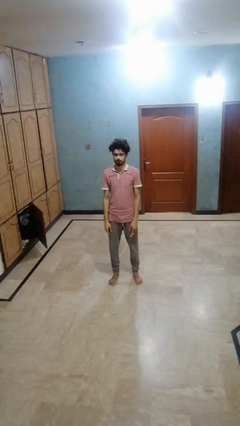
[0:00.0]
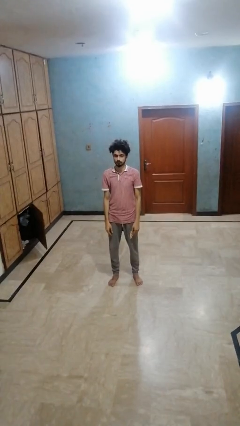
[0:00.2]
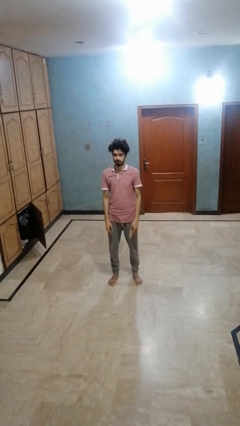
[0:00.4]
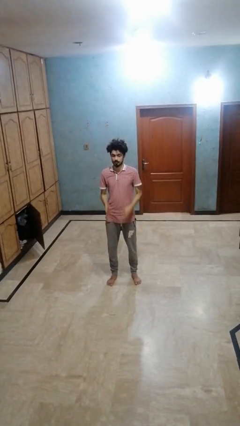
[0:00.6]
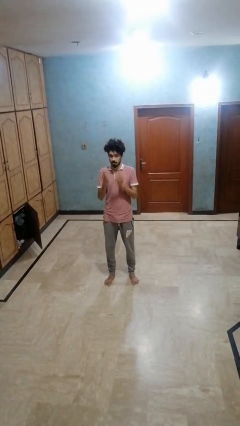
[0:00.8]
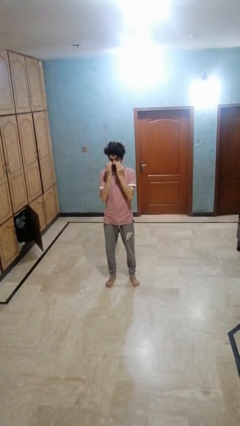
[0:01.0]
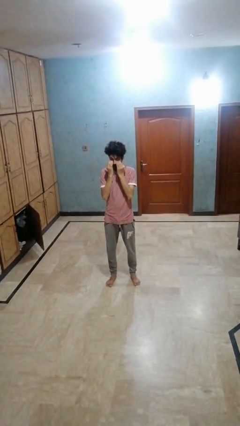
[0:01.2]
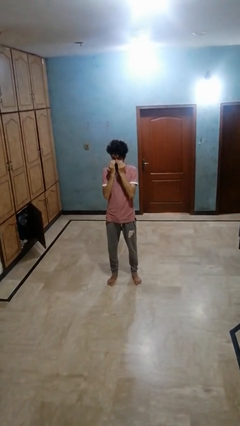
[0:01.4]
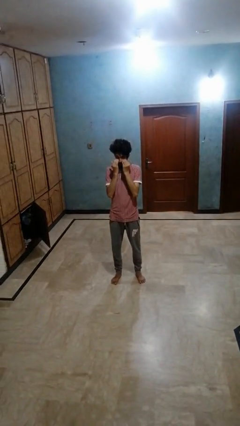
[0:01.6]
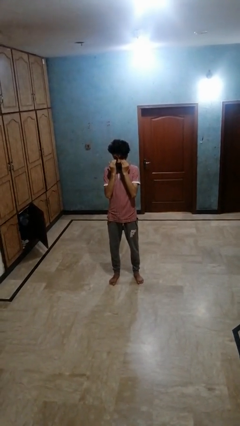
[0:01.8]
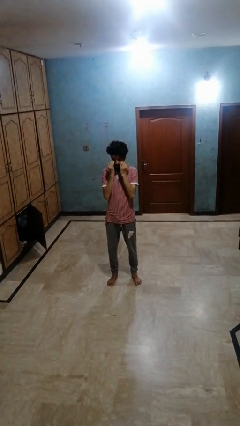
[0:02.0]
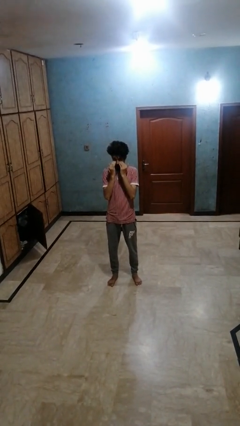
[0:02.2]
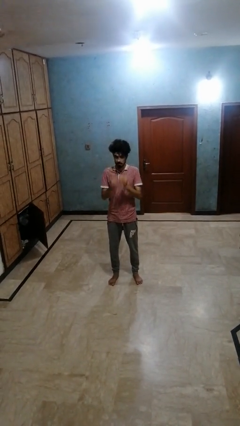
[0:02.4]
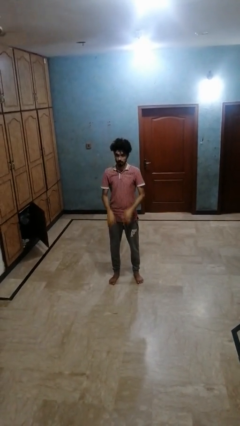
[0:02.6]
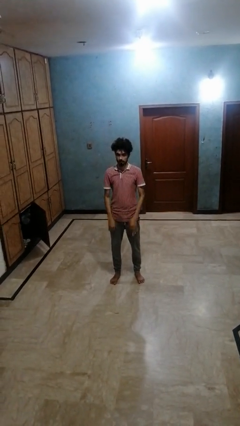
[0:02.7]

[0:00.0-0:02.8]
person rubs eyes

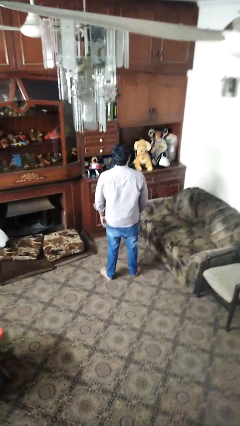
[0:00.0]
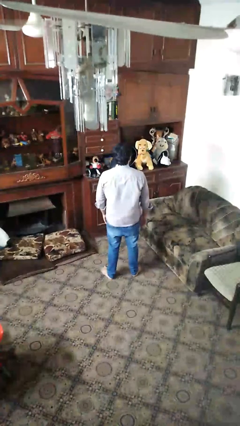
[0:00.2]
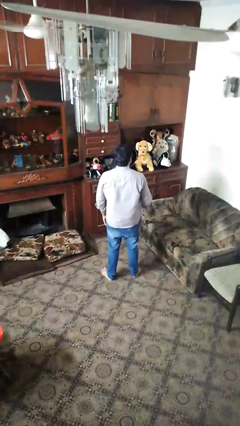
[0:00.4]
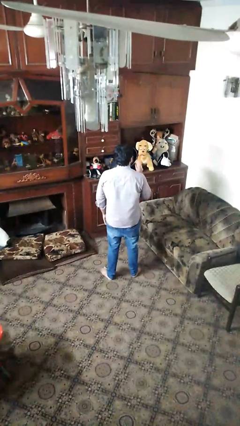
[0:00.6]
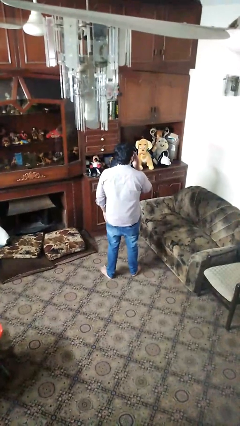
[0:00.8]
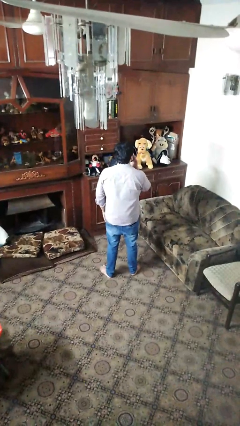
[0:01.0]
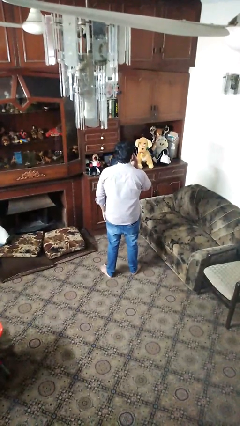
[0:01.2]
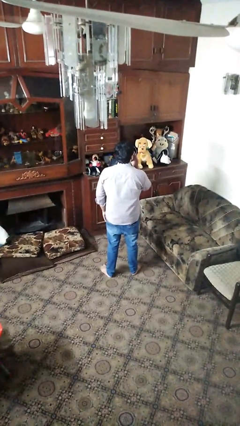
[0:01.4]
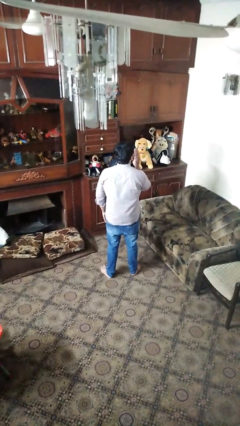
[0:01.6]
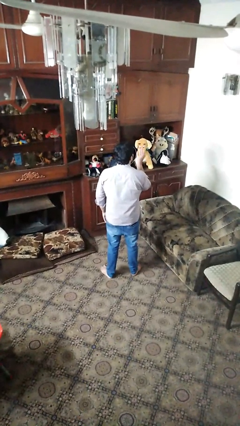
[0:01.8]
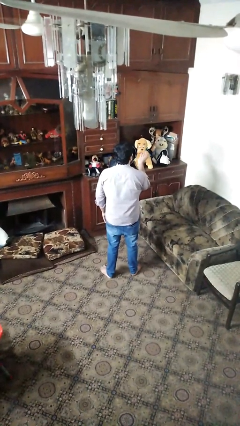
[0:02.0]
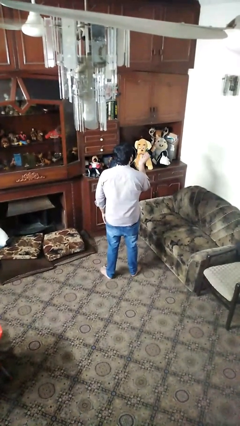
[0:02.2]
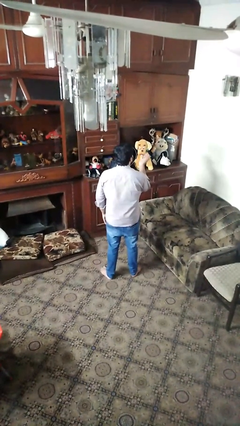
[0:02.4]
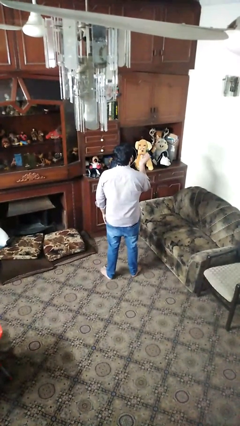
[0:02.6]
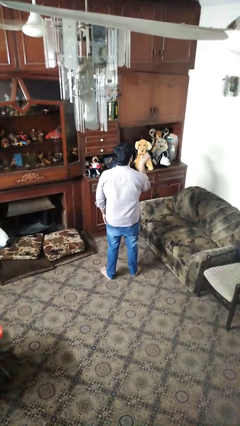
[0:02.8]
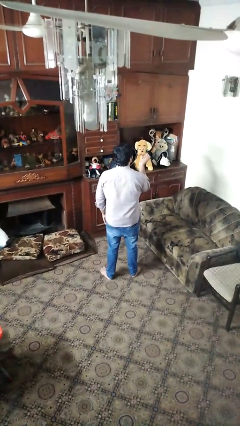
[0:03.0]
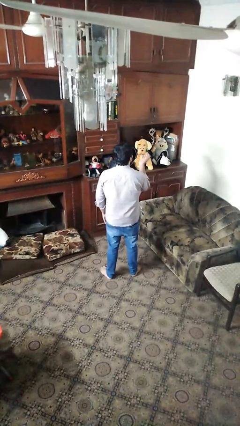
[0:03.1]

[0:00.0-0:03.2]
person gestures blow kiss

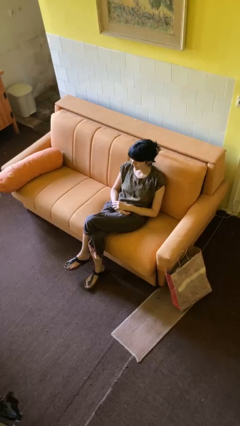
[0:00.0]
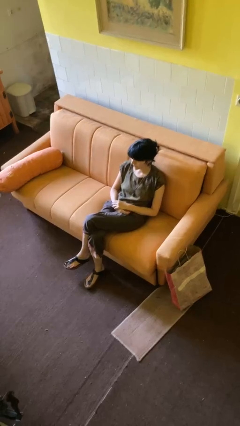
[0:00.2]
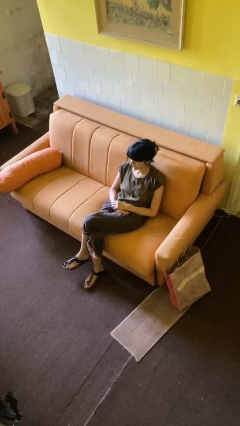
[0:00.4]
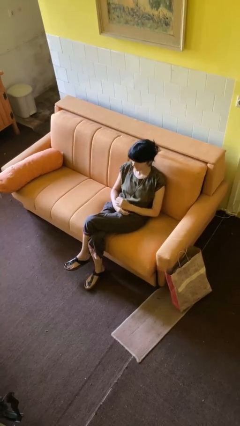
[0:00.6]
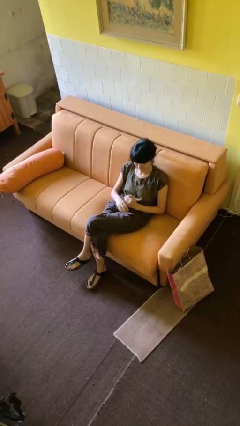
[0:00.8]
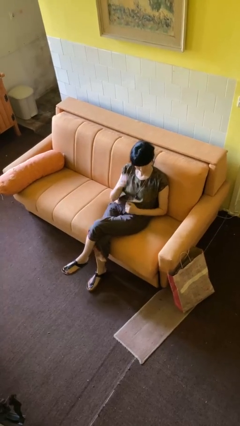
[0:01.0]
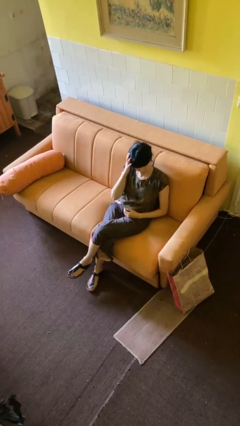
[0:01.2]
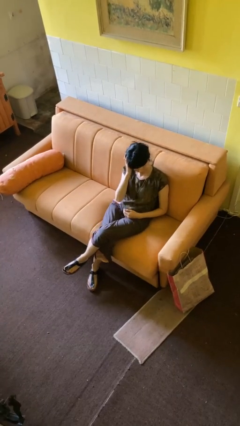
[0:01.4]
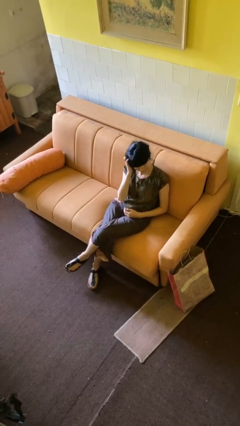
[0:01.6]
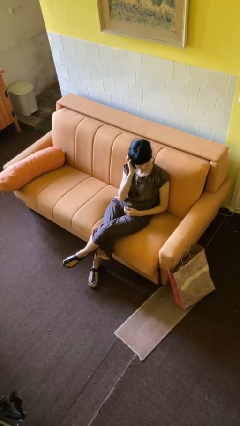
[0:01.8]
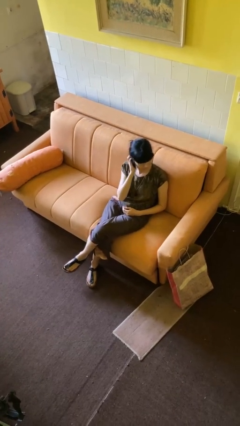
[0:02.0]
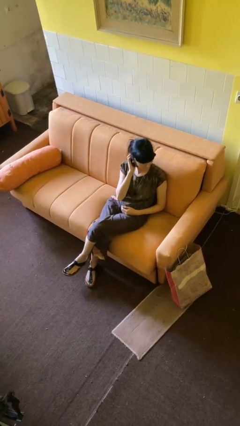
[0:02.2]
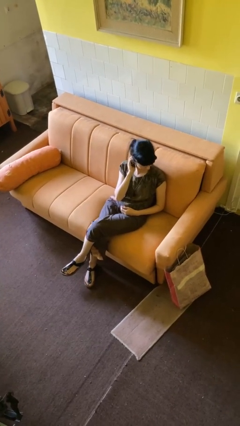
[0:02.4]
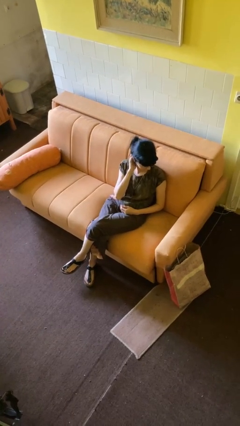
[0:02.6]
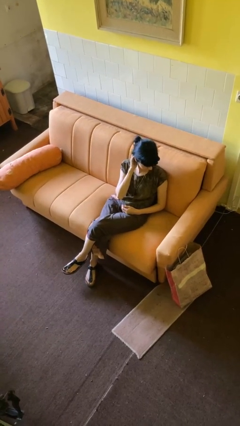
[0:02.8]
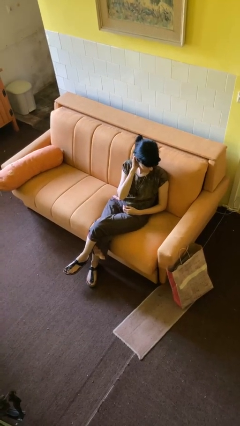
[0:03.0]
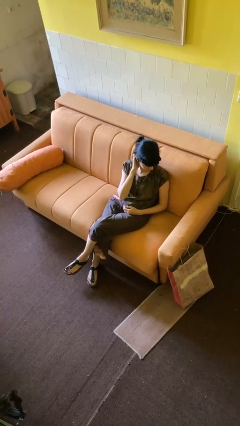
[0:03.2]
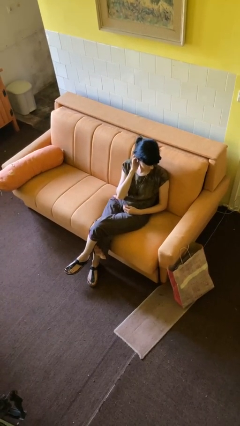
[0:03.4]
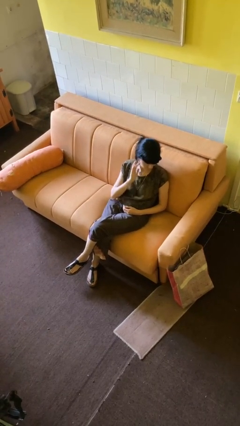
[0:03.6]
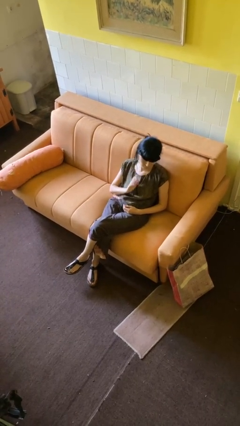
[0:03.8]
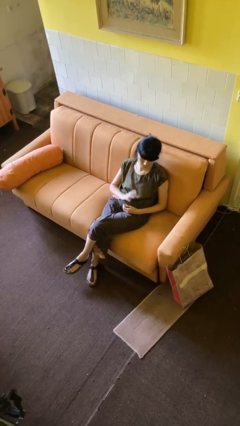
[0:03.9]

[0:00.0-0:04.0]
person scratches face

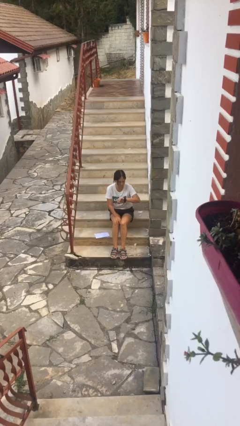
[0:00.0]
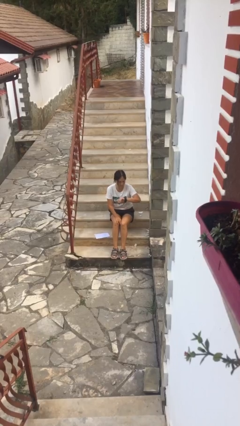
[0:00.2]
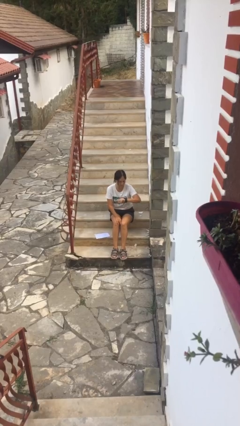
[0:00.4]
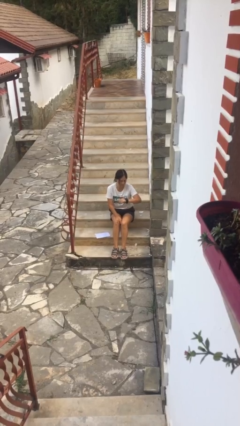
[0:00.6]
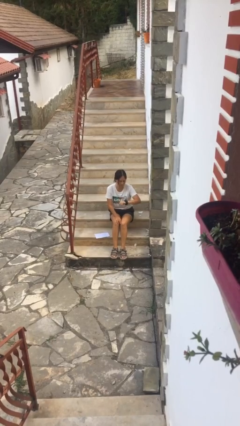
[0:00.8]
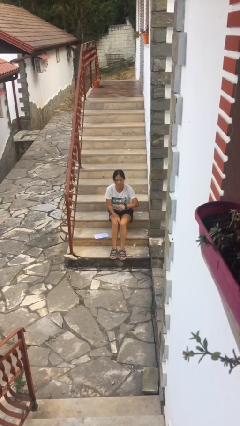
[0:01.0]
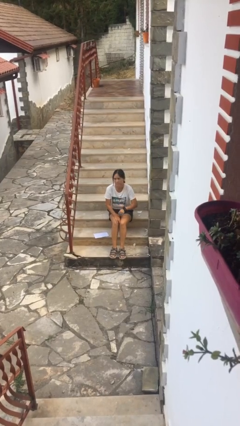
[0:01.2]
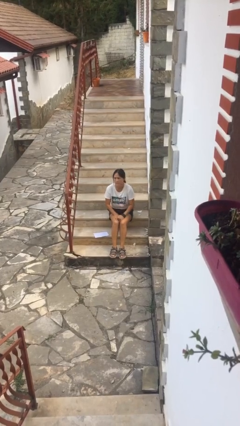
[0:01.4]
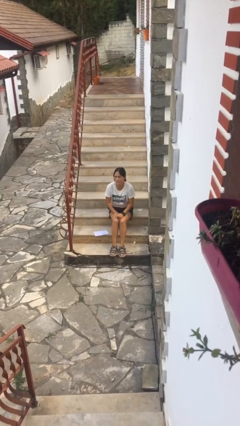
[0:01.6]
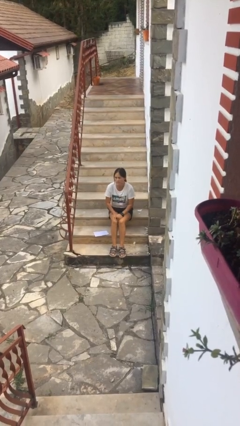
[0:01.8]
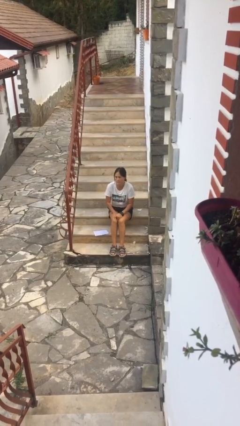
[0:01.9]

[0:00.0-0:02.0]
person looks at wristwatch

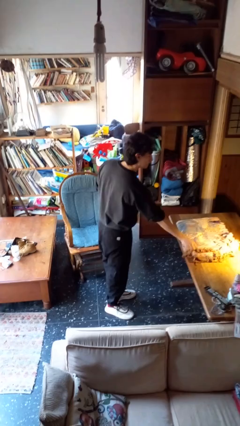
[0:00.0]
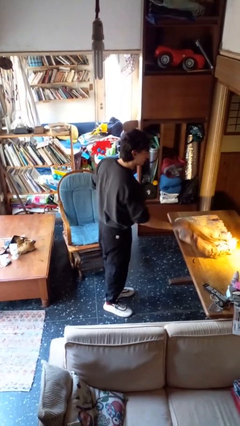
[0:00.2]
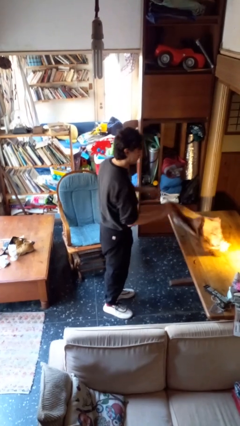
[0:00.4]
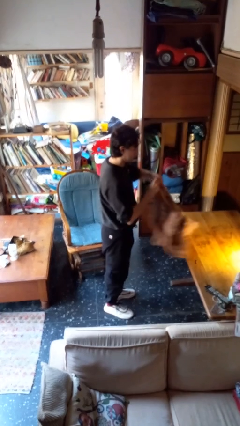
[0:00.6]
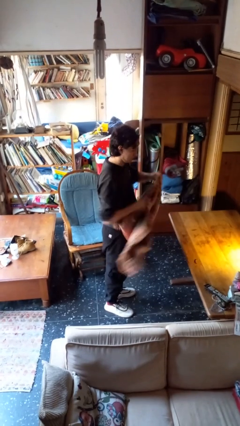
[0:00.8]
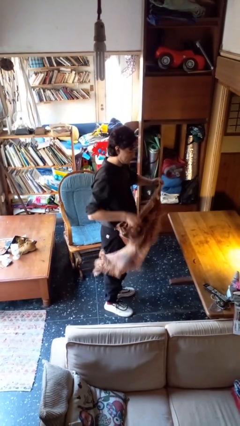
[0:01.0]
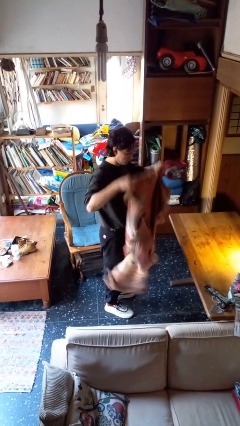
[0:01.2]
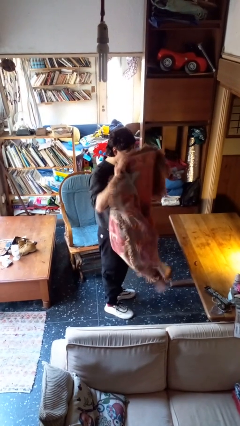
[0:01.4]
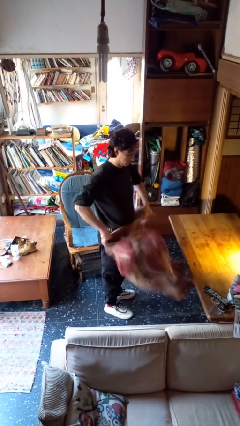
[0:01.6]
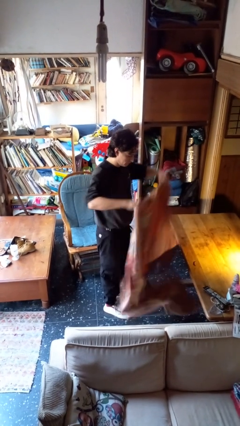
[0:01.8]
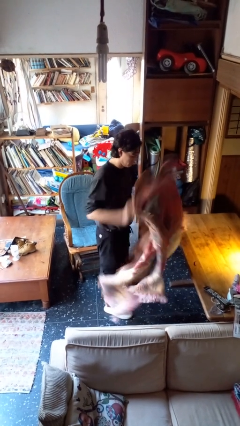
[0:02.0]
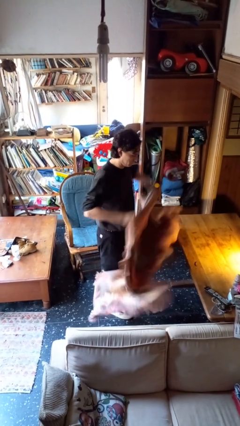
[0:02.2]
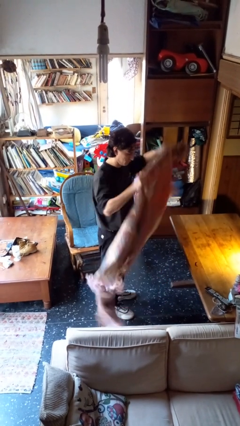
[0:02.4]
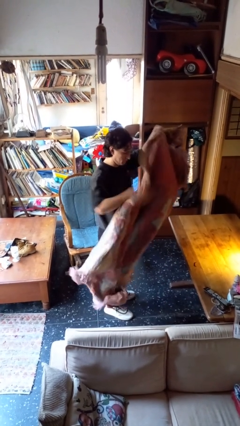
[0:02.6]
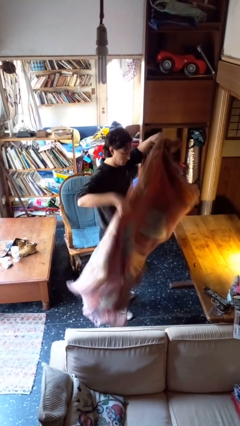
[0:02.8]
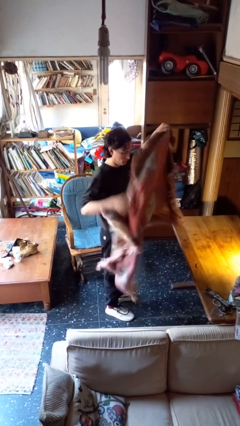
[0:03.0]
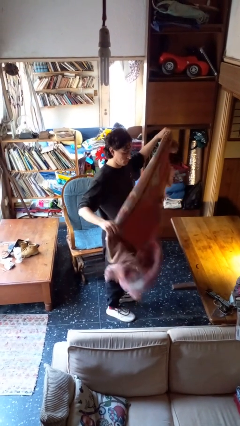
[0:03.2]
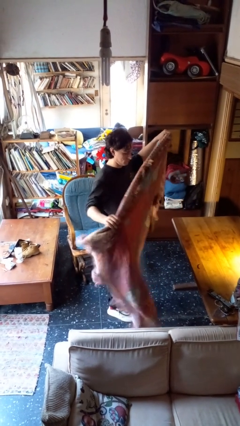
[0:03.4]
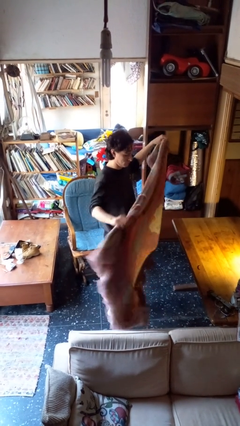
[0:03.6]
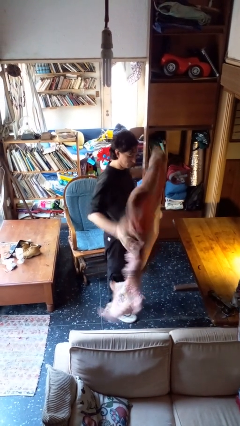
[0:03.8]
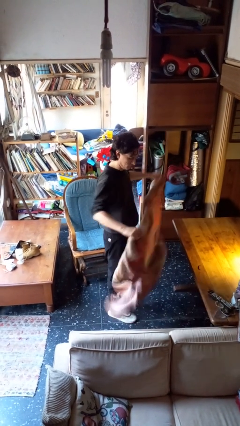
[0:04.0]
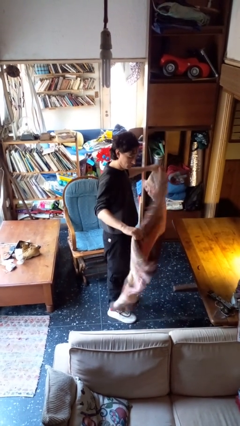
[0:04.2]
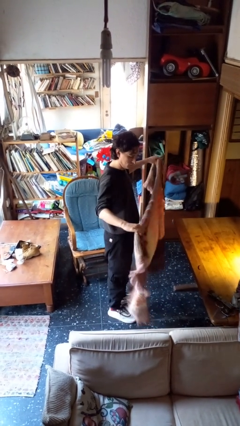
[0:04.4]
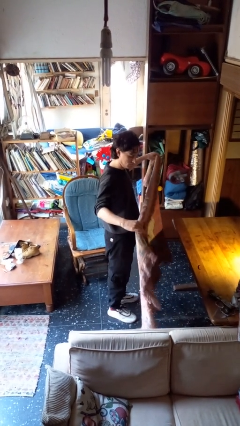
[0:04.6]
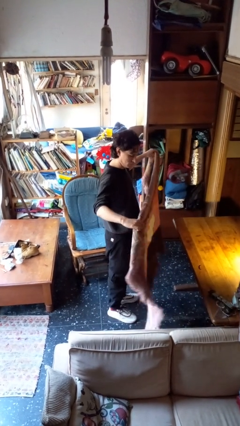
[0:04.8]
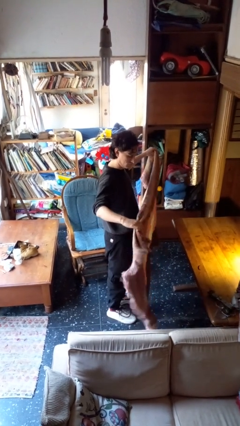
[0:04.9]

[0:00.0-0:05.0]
person unfolds blanket

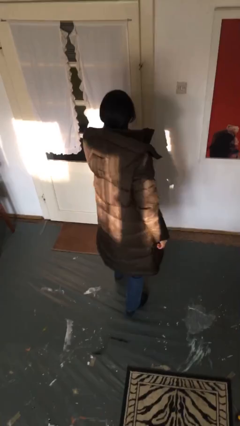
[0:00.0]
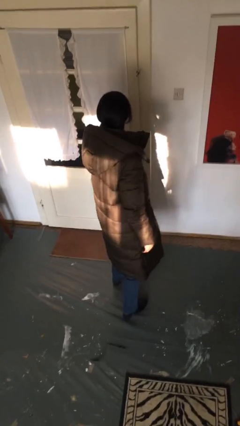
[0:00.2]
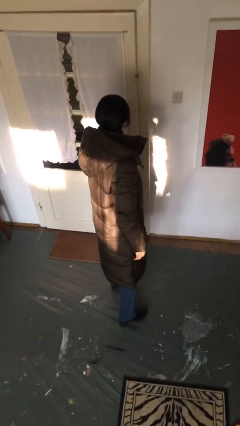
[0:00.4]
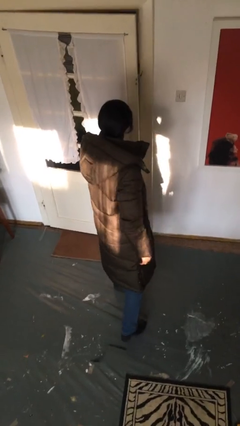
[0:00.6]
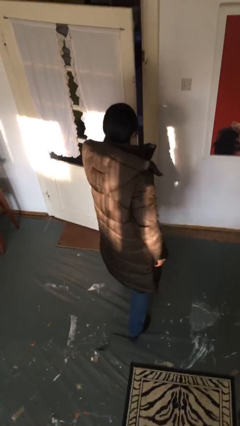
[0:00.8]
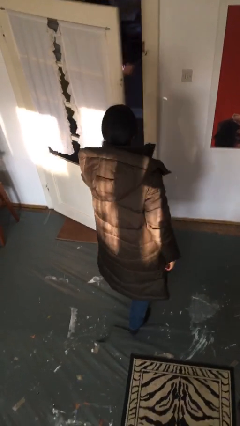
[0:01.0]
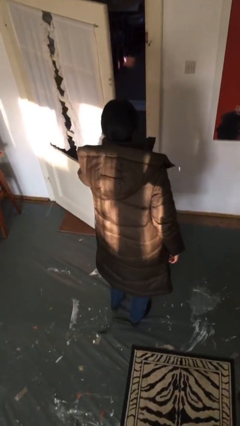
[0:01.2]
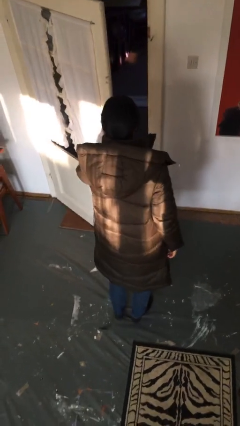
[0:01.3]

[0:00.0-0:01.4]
person opens facility door
